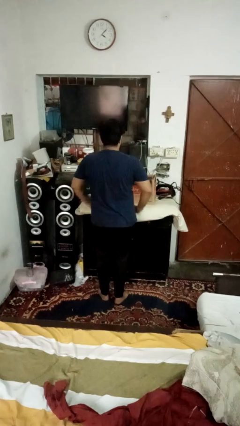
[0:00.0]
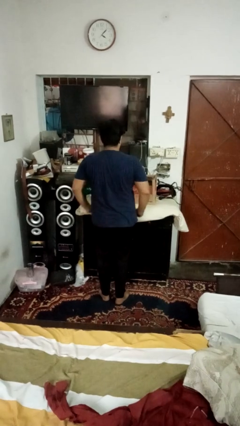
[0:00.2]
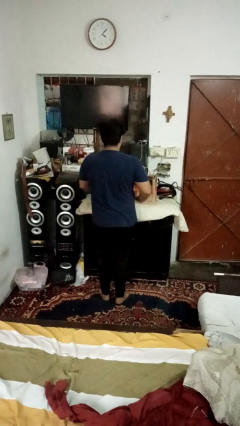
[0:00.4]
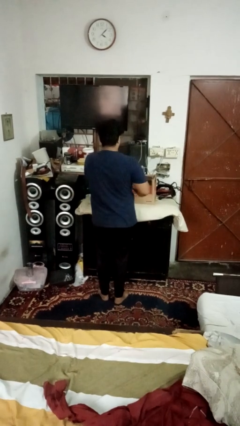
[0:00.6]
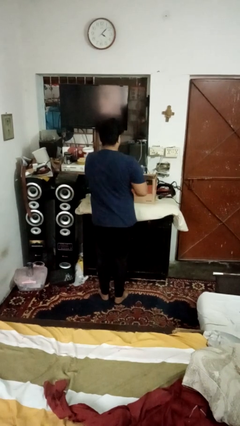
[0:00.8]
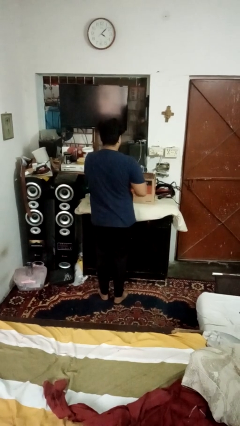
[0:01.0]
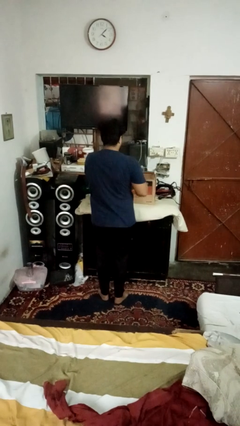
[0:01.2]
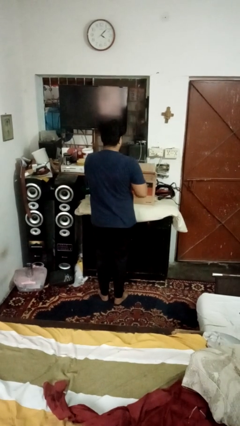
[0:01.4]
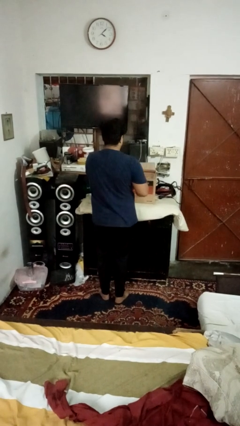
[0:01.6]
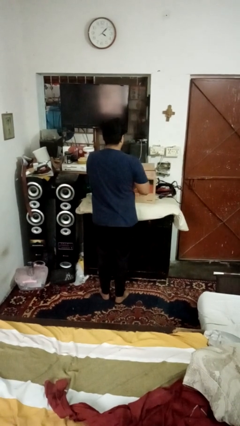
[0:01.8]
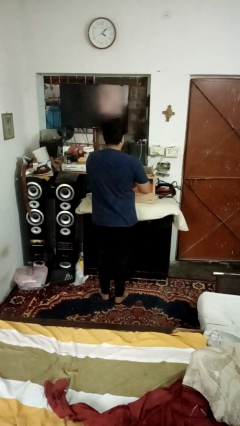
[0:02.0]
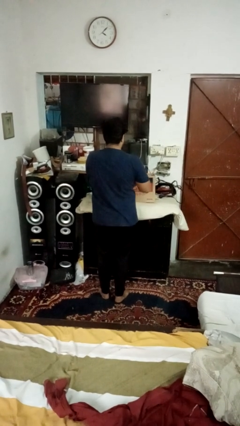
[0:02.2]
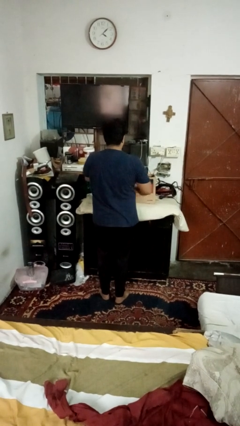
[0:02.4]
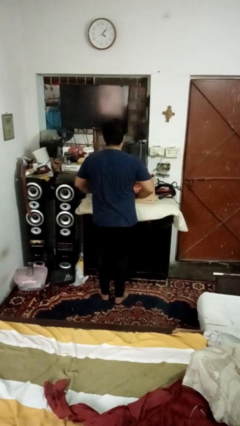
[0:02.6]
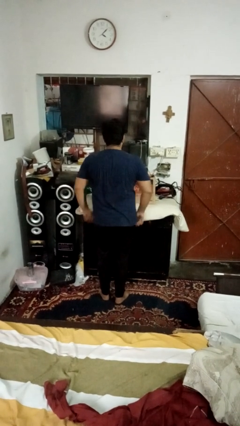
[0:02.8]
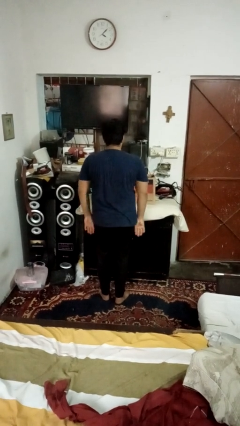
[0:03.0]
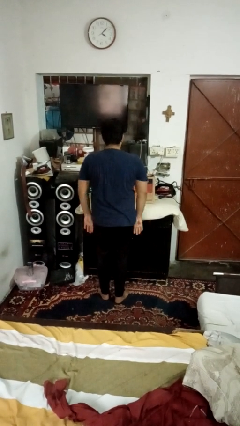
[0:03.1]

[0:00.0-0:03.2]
person closes box

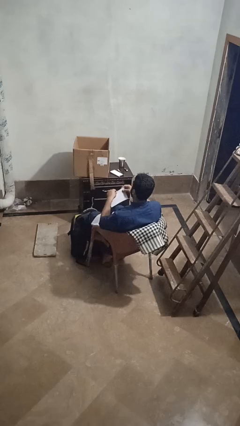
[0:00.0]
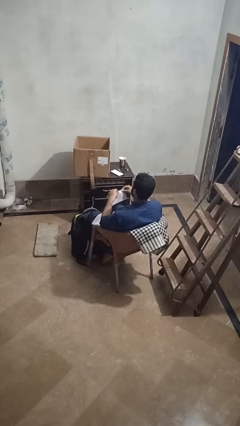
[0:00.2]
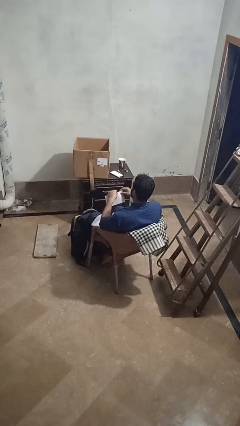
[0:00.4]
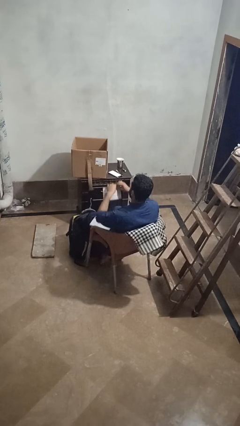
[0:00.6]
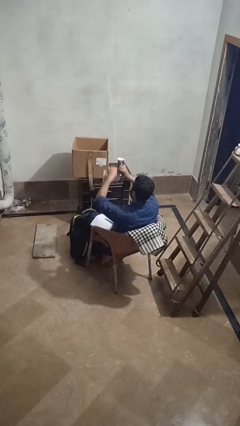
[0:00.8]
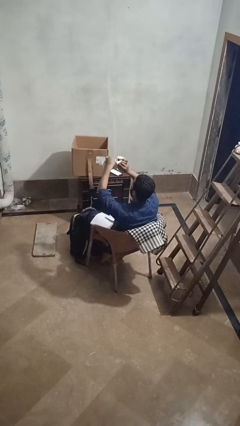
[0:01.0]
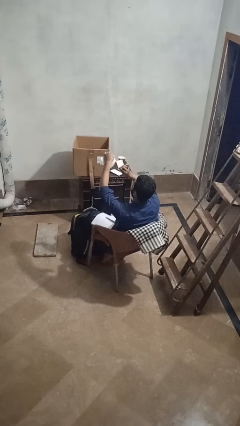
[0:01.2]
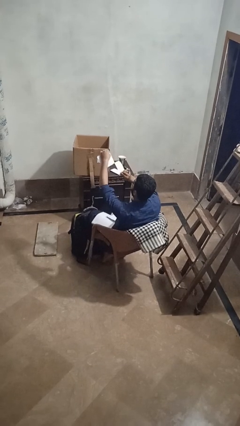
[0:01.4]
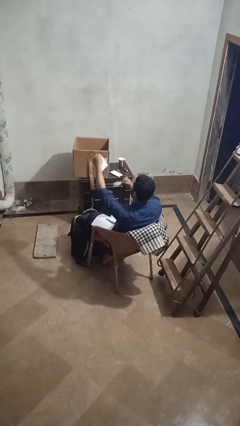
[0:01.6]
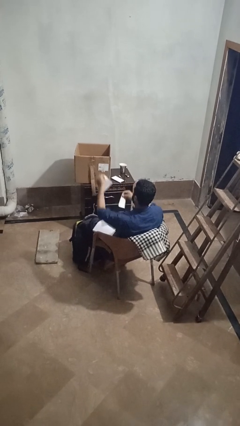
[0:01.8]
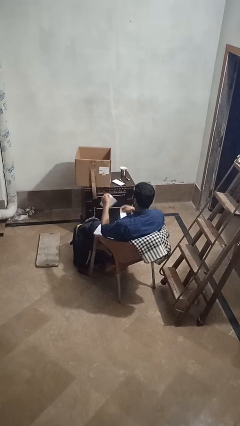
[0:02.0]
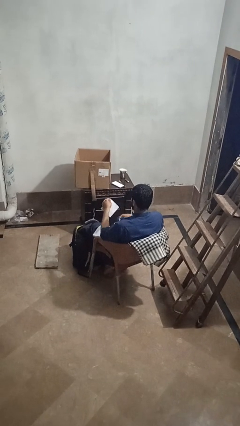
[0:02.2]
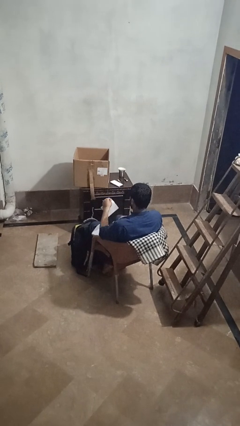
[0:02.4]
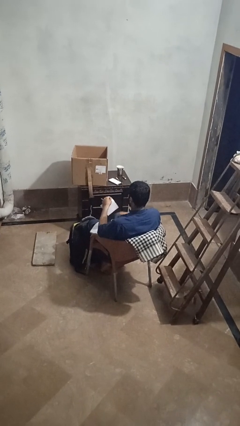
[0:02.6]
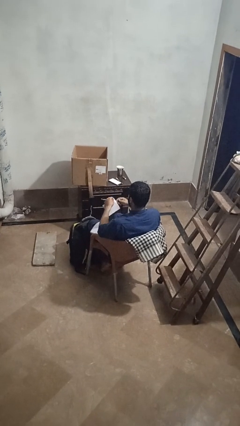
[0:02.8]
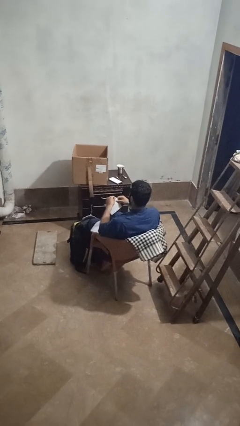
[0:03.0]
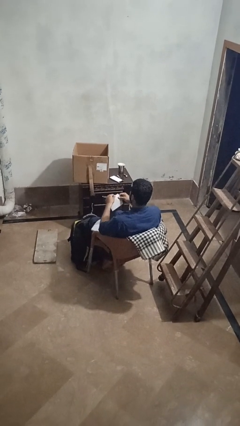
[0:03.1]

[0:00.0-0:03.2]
person tears paper

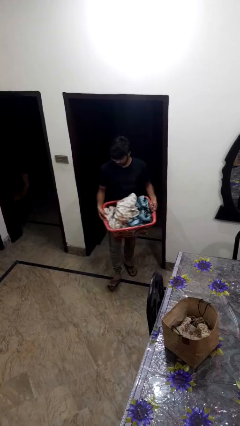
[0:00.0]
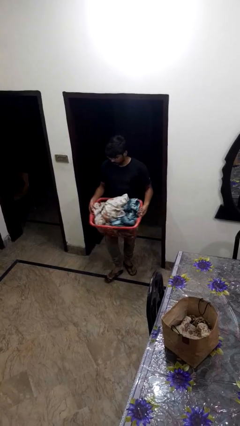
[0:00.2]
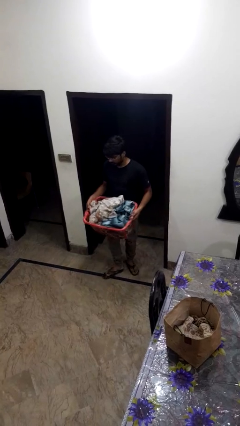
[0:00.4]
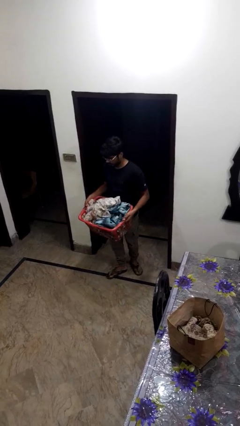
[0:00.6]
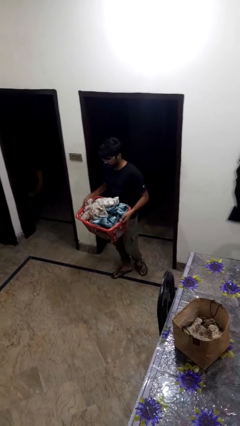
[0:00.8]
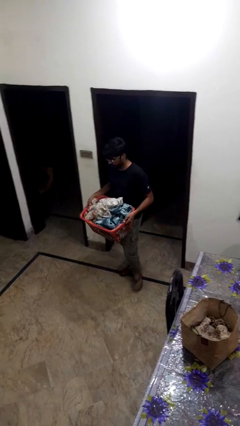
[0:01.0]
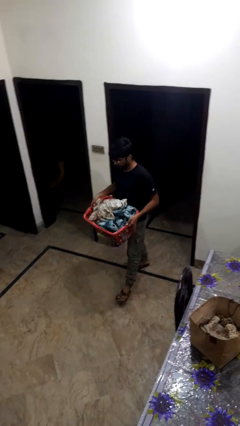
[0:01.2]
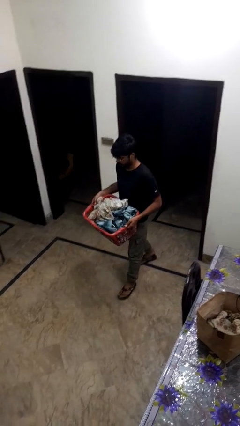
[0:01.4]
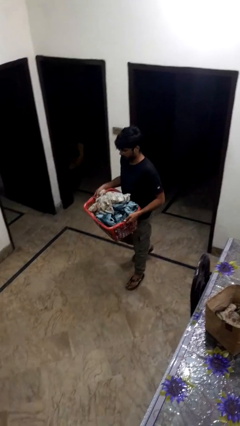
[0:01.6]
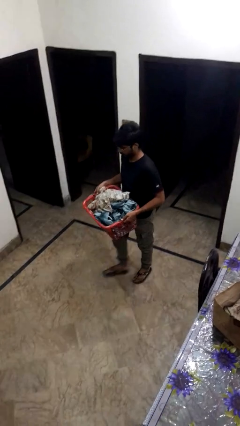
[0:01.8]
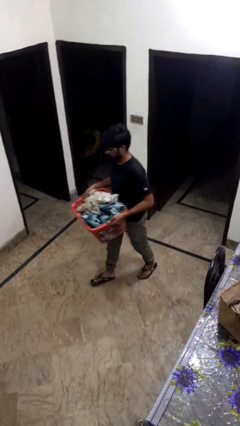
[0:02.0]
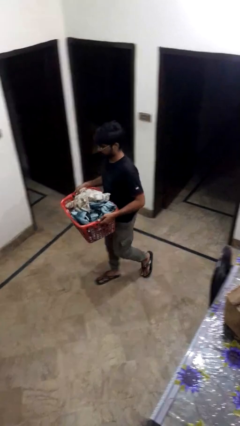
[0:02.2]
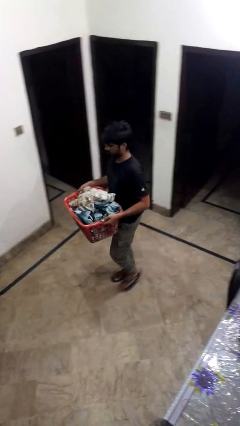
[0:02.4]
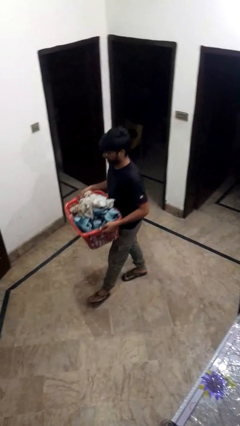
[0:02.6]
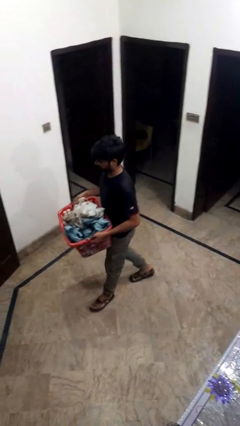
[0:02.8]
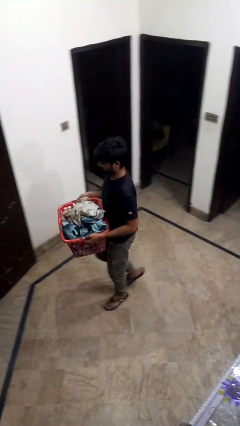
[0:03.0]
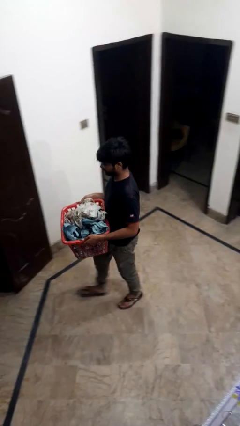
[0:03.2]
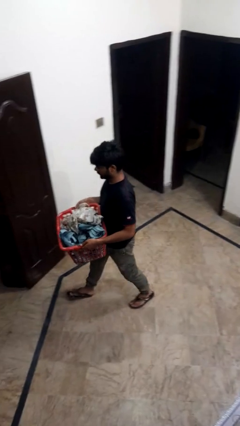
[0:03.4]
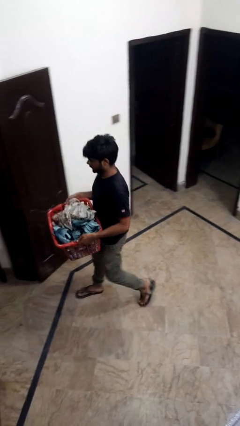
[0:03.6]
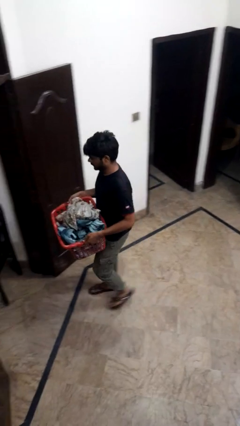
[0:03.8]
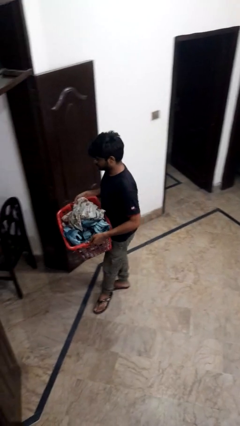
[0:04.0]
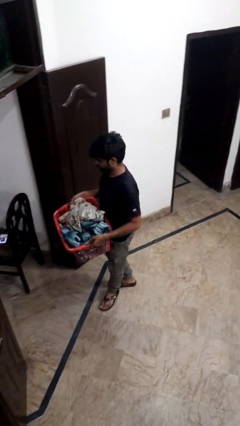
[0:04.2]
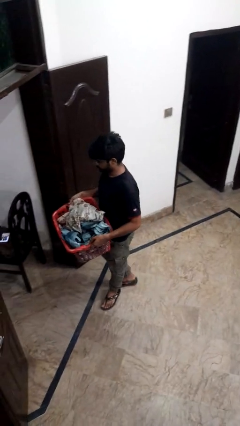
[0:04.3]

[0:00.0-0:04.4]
person carries laundry basket

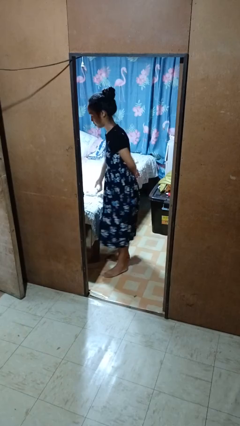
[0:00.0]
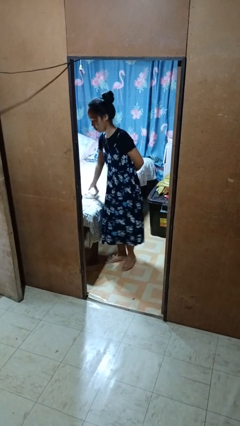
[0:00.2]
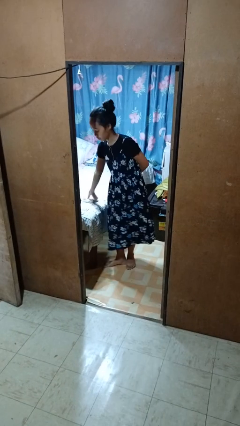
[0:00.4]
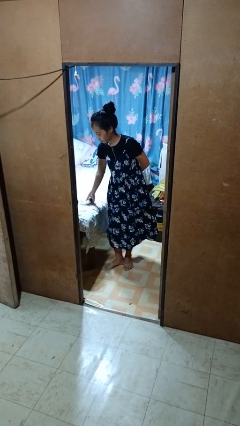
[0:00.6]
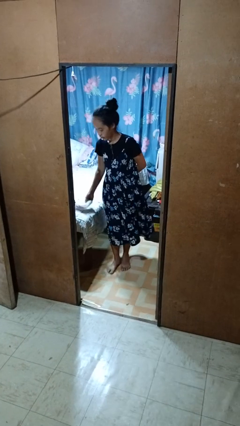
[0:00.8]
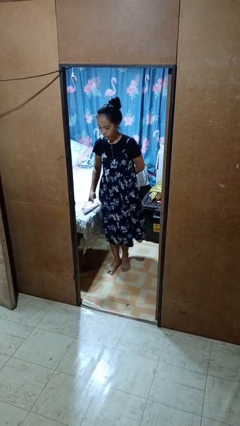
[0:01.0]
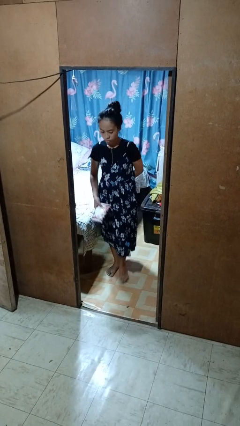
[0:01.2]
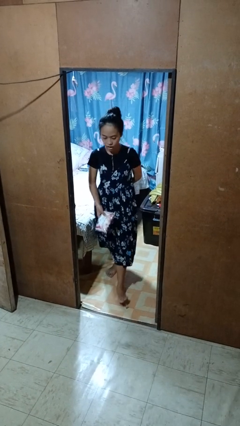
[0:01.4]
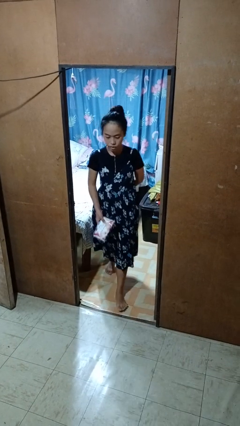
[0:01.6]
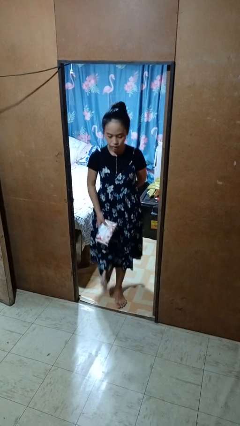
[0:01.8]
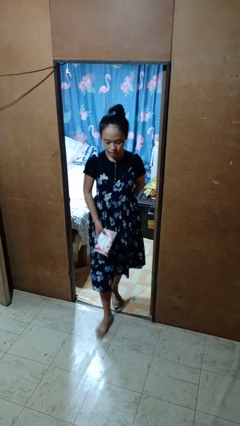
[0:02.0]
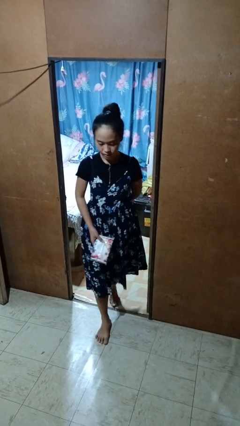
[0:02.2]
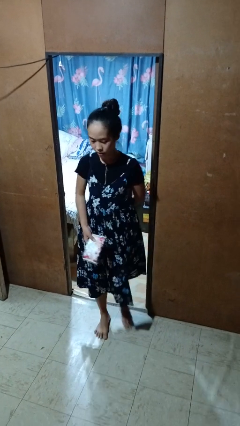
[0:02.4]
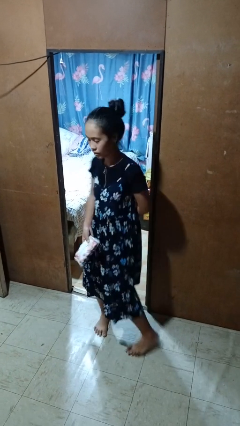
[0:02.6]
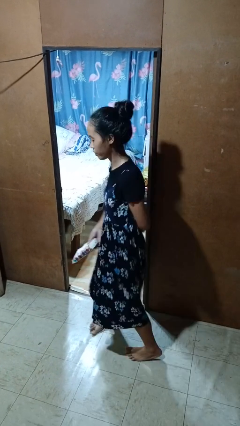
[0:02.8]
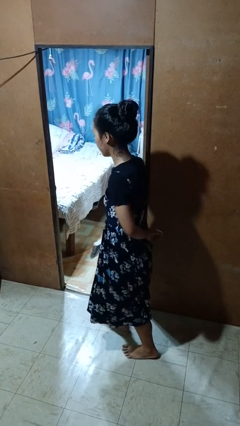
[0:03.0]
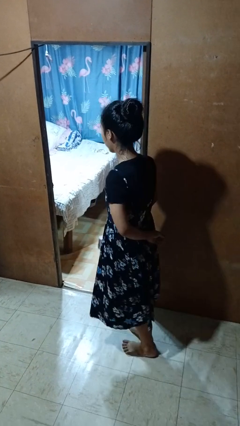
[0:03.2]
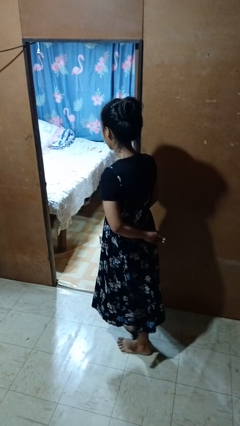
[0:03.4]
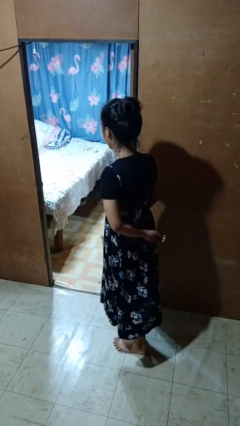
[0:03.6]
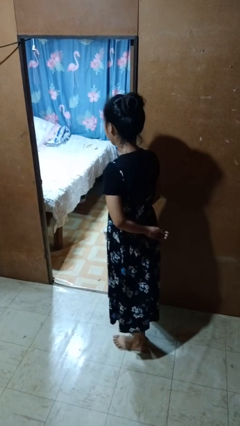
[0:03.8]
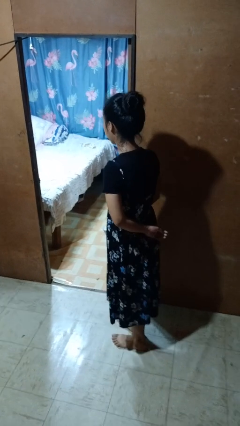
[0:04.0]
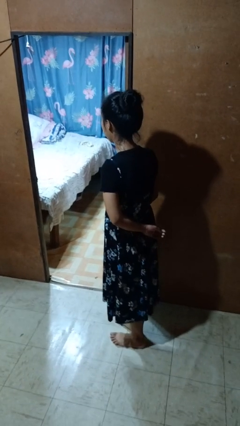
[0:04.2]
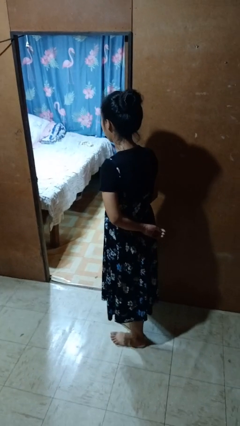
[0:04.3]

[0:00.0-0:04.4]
person picks up object from bed

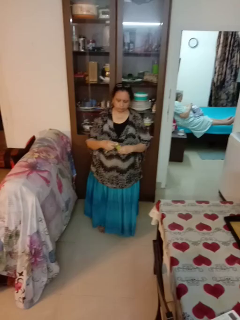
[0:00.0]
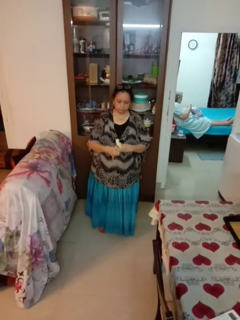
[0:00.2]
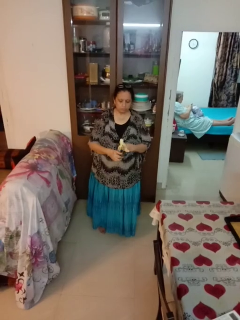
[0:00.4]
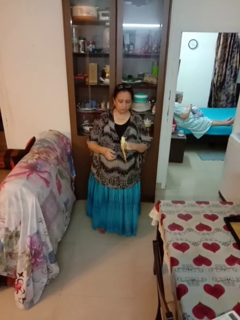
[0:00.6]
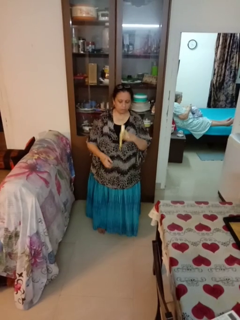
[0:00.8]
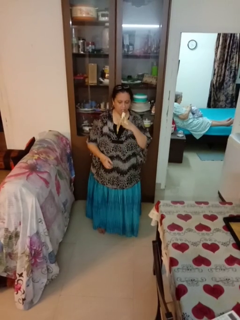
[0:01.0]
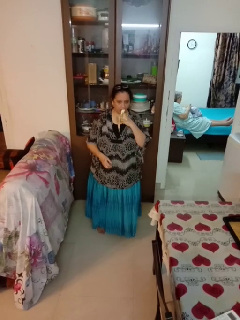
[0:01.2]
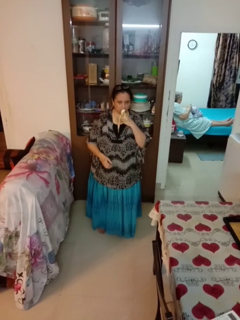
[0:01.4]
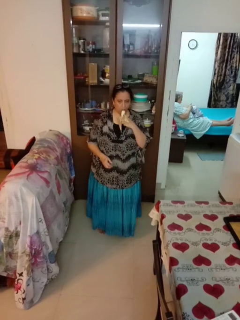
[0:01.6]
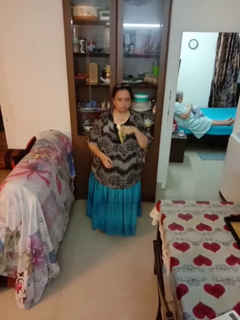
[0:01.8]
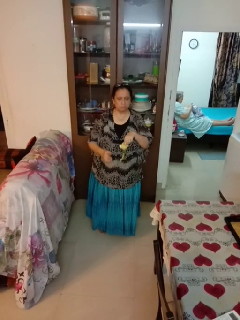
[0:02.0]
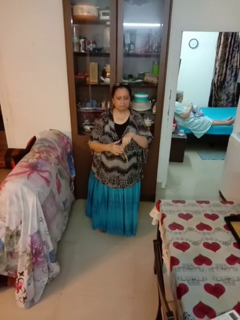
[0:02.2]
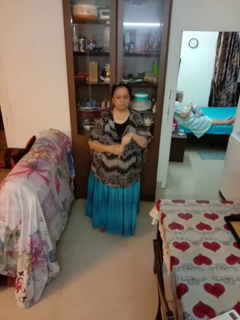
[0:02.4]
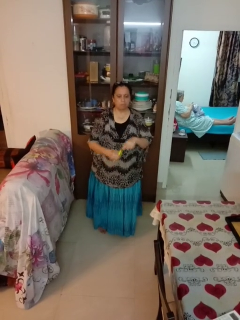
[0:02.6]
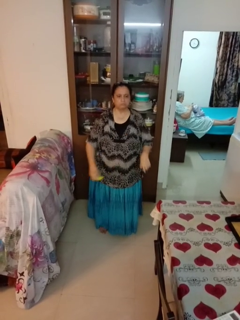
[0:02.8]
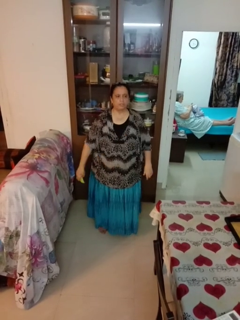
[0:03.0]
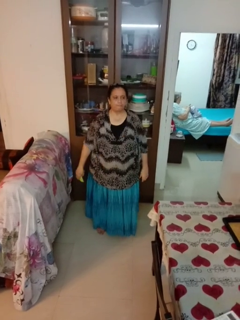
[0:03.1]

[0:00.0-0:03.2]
person eats banana
